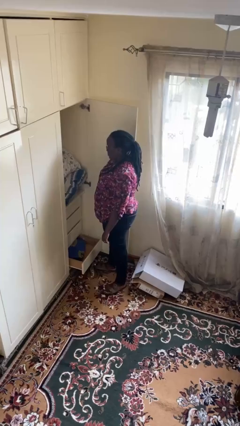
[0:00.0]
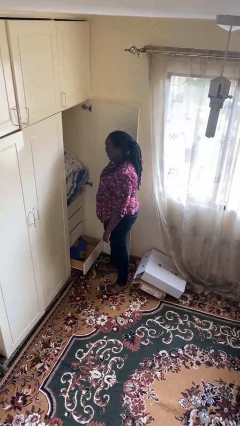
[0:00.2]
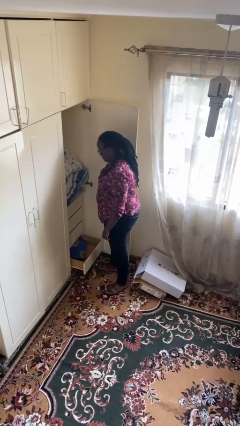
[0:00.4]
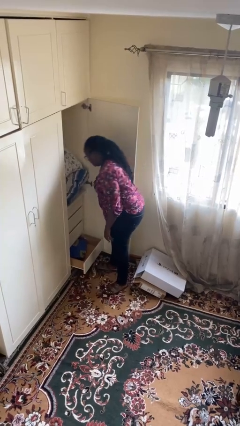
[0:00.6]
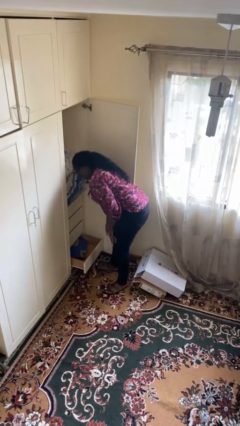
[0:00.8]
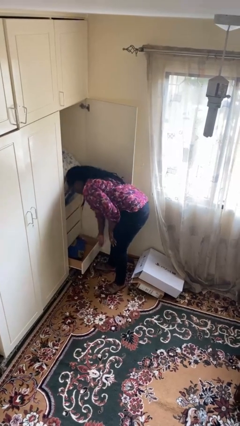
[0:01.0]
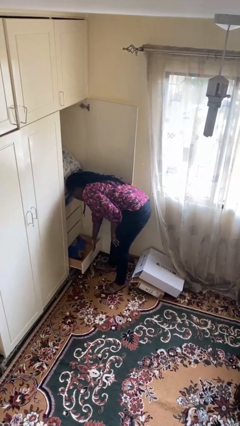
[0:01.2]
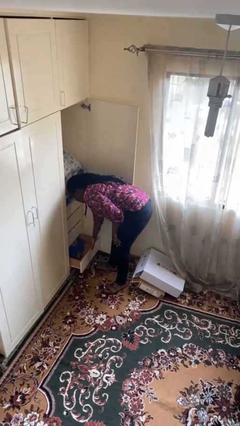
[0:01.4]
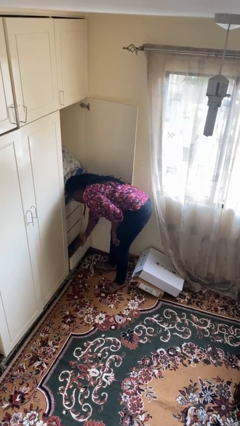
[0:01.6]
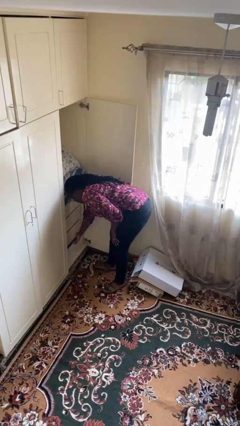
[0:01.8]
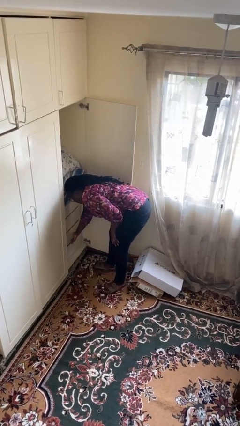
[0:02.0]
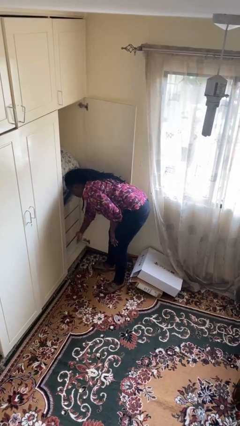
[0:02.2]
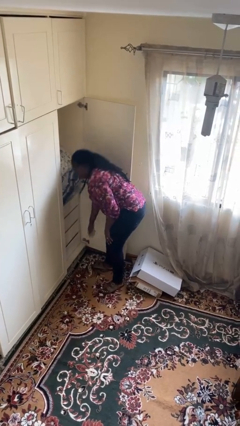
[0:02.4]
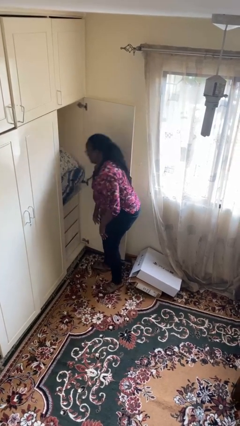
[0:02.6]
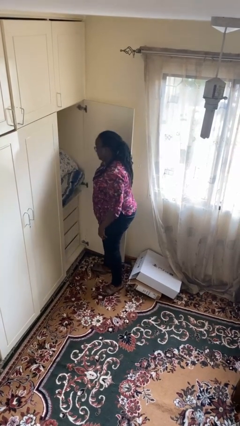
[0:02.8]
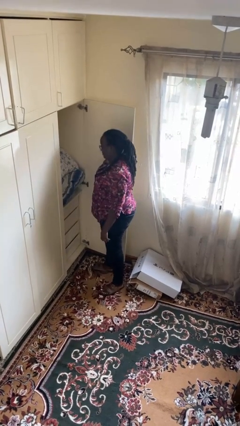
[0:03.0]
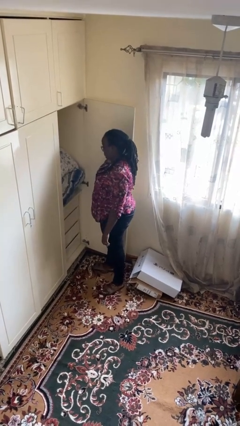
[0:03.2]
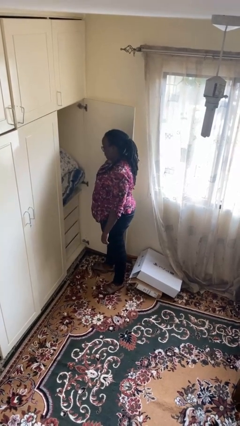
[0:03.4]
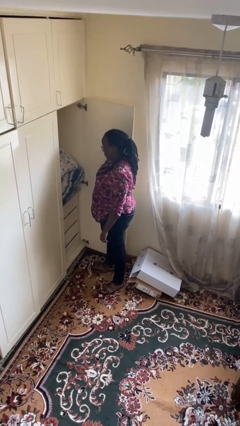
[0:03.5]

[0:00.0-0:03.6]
person closes dresser drawer

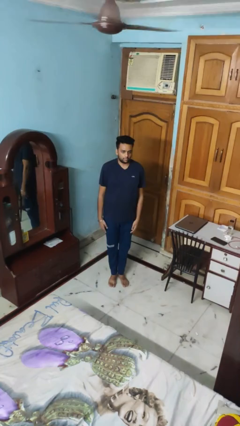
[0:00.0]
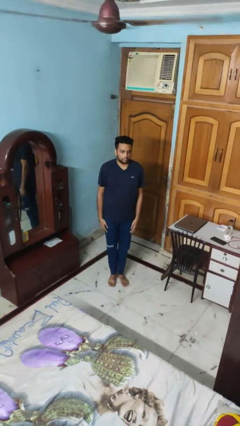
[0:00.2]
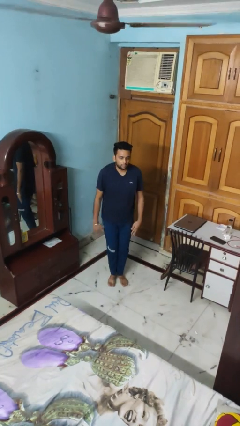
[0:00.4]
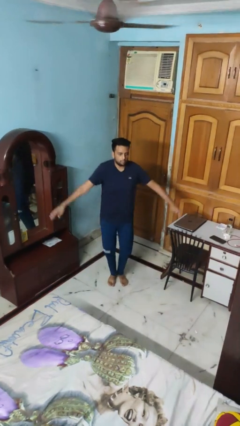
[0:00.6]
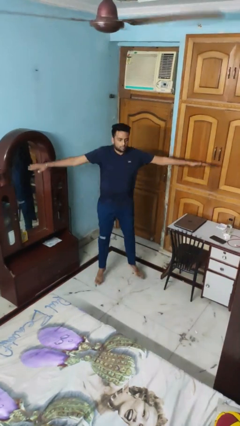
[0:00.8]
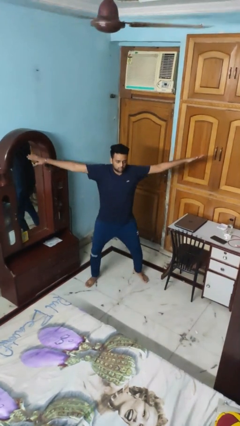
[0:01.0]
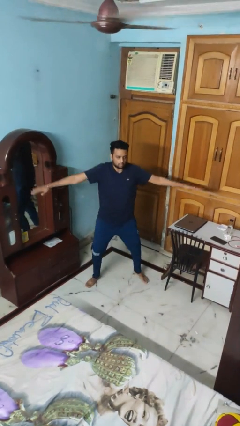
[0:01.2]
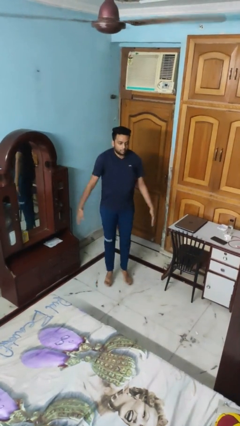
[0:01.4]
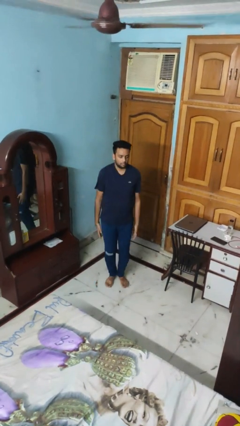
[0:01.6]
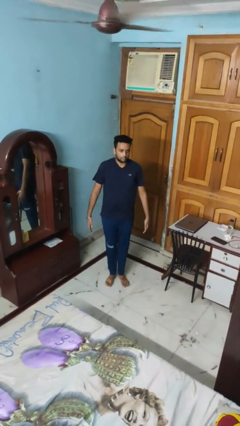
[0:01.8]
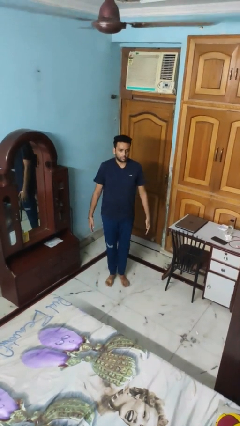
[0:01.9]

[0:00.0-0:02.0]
person exercises with jumping jacks

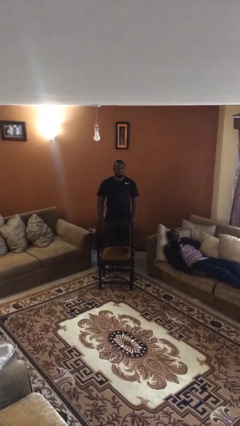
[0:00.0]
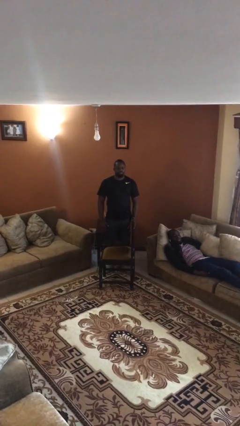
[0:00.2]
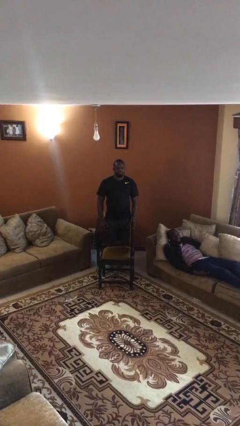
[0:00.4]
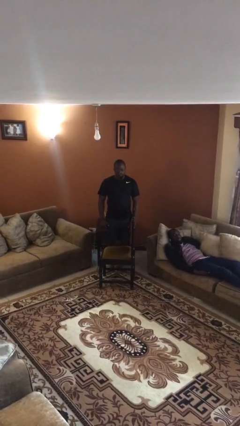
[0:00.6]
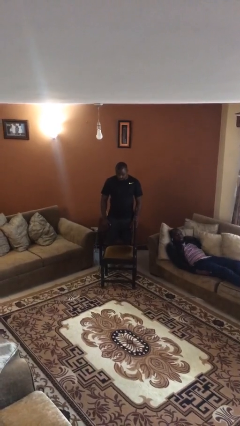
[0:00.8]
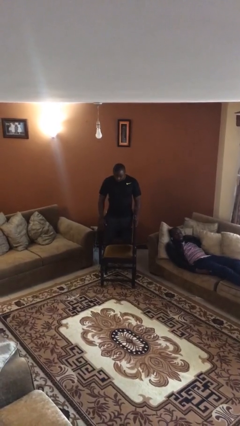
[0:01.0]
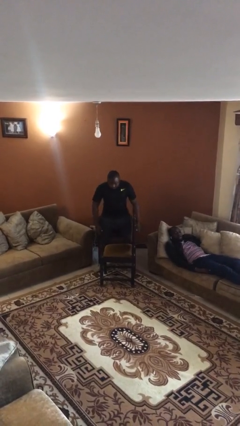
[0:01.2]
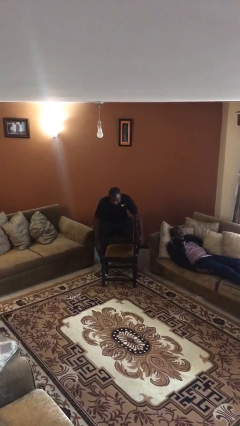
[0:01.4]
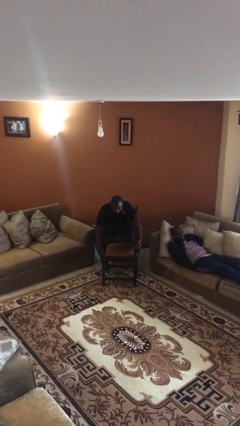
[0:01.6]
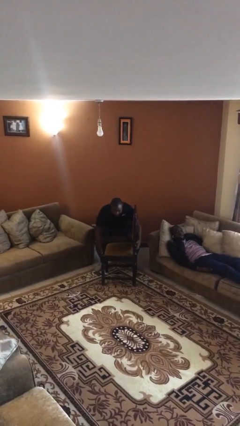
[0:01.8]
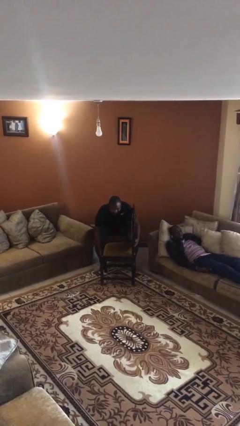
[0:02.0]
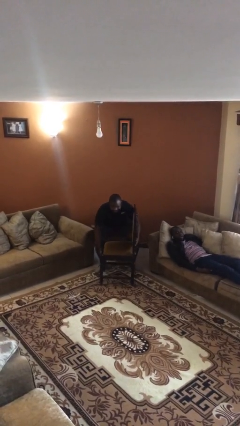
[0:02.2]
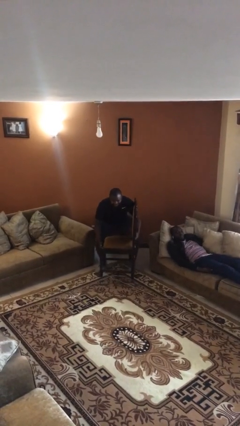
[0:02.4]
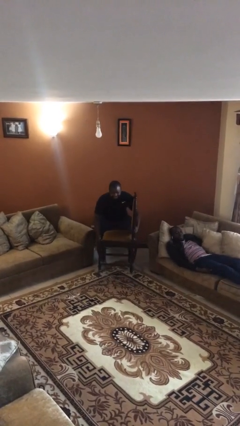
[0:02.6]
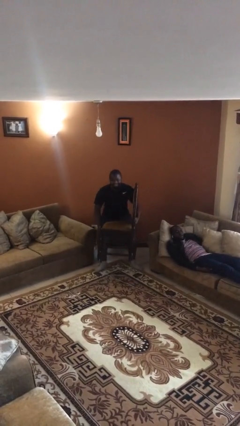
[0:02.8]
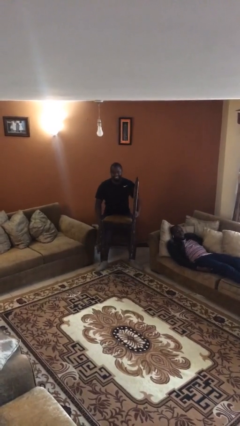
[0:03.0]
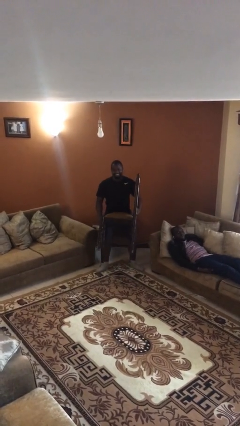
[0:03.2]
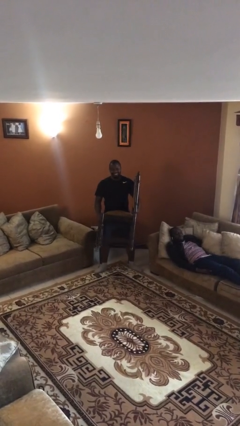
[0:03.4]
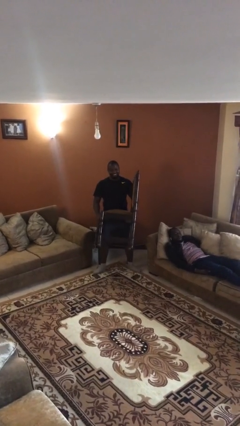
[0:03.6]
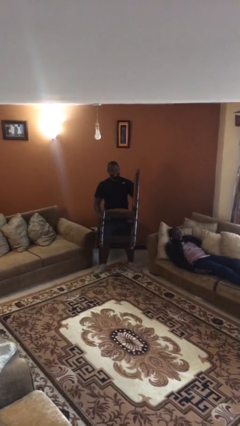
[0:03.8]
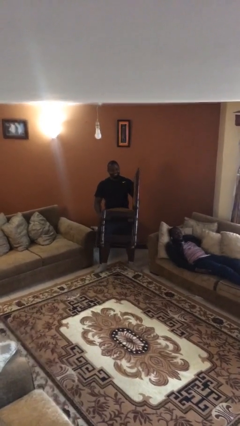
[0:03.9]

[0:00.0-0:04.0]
person picks up object from floor

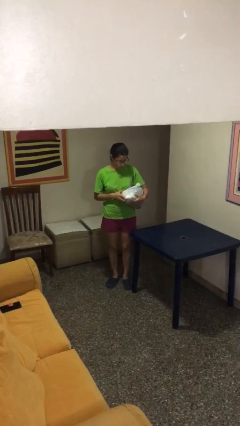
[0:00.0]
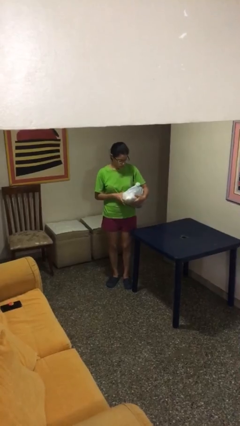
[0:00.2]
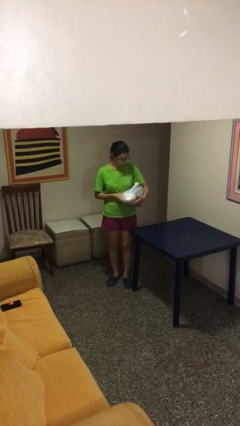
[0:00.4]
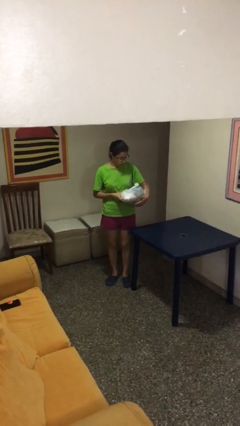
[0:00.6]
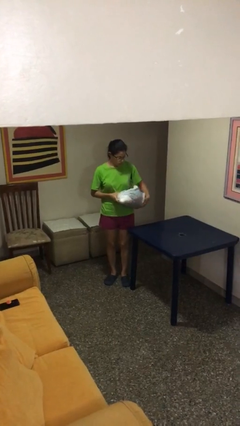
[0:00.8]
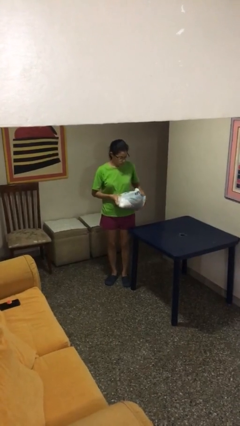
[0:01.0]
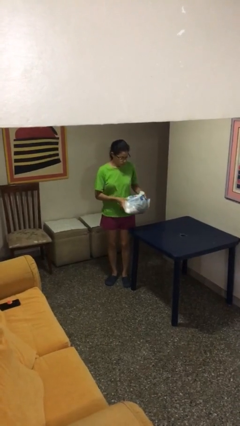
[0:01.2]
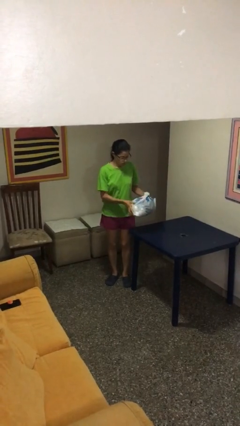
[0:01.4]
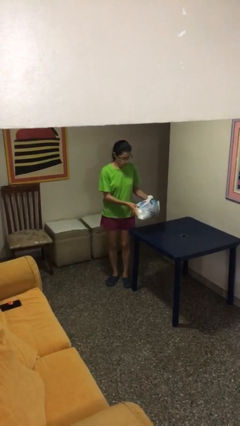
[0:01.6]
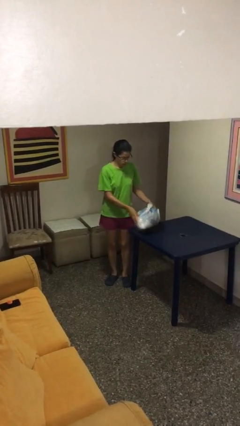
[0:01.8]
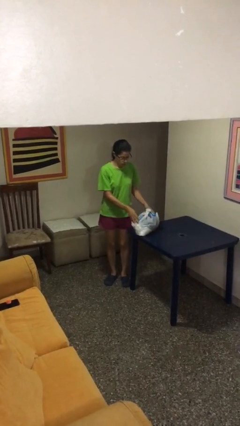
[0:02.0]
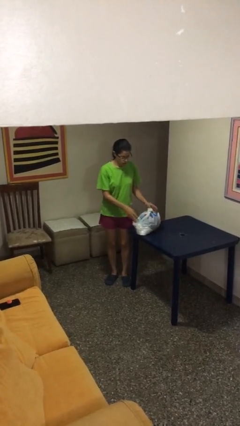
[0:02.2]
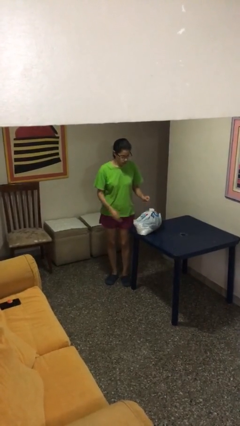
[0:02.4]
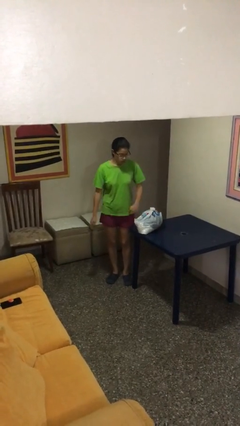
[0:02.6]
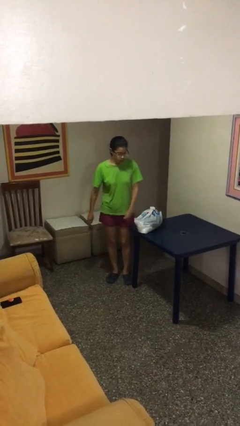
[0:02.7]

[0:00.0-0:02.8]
person puts down object on table

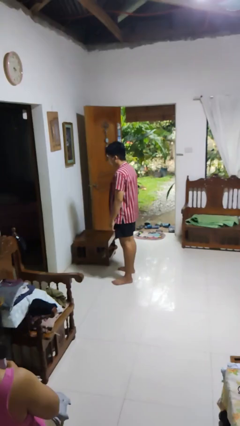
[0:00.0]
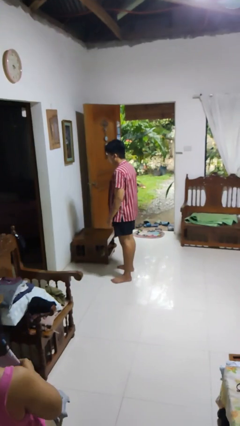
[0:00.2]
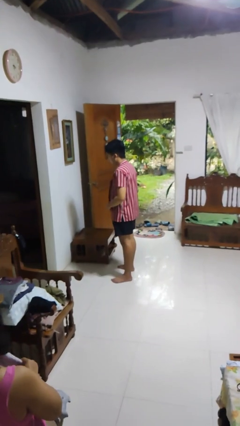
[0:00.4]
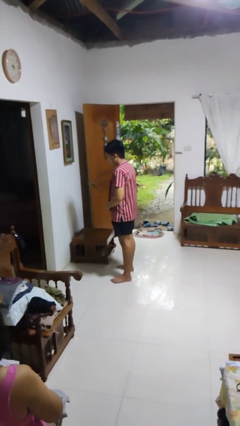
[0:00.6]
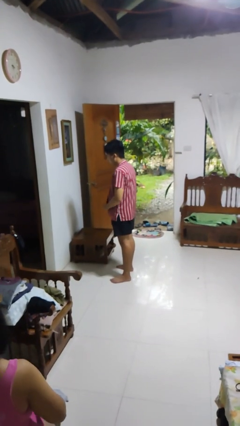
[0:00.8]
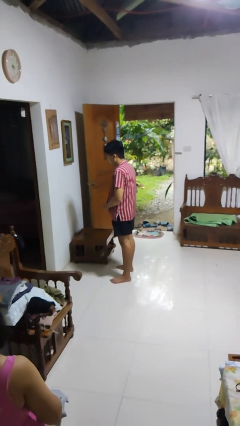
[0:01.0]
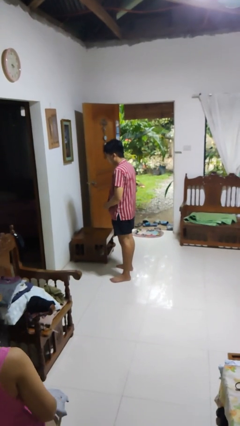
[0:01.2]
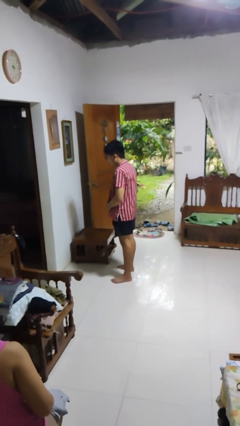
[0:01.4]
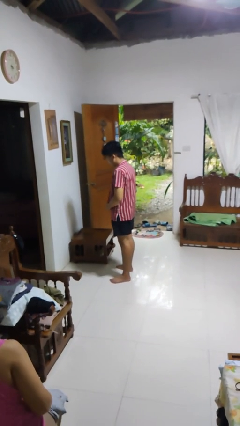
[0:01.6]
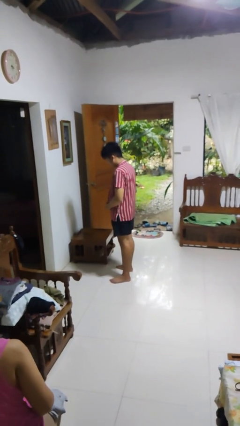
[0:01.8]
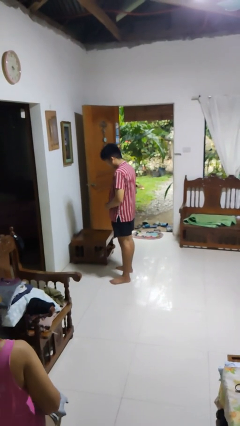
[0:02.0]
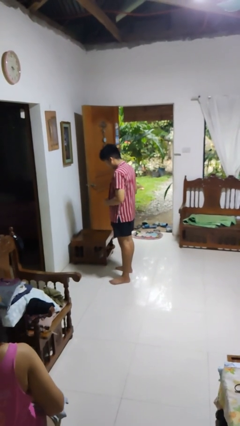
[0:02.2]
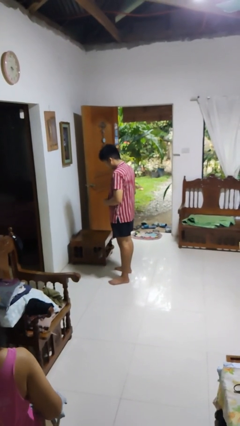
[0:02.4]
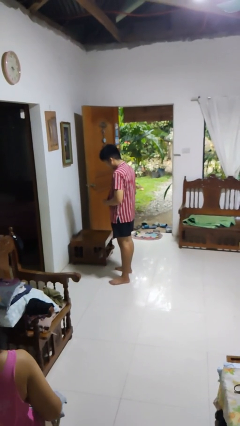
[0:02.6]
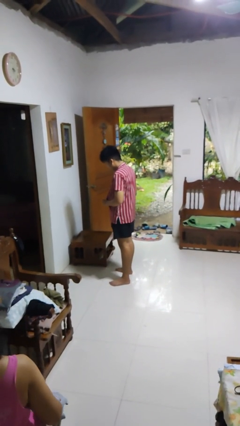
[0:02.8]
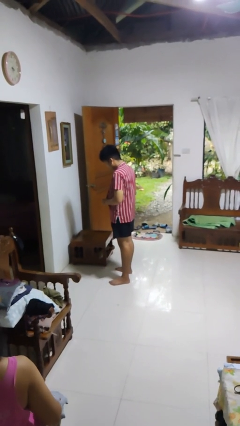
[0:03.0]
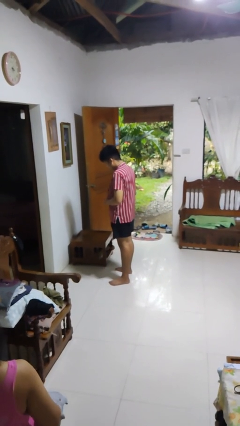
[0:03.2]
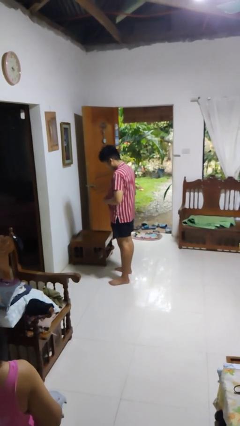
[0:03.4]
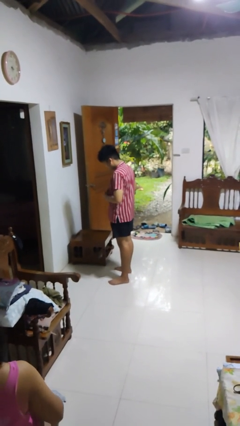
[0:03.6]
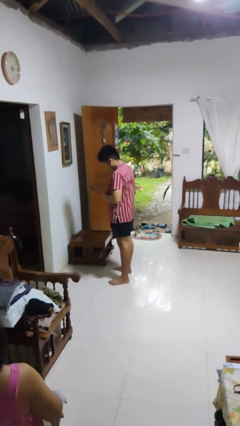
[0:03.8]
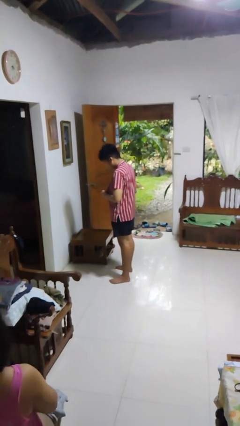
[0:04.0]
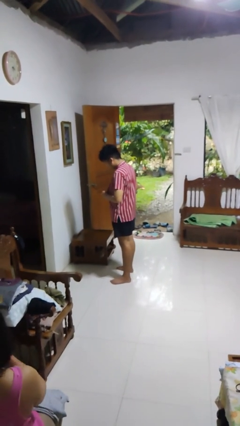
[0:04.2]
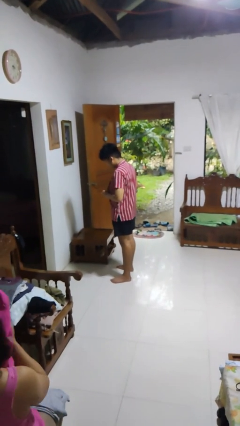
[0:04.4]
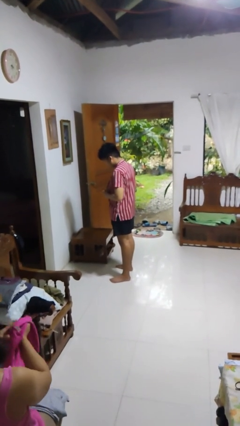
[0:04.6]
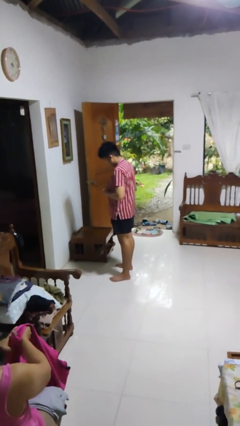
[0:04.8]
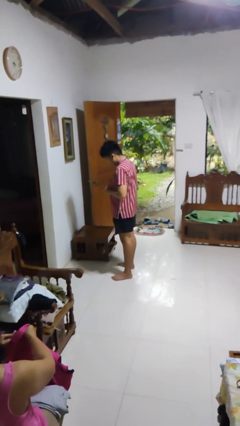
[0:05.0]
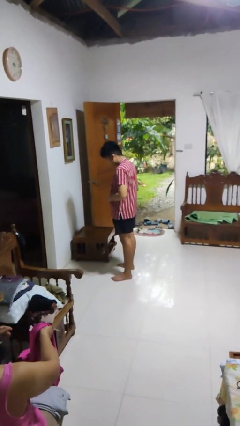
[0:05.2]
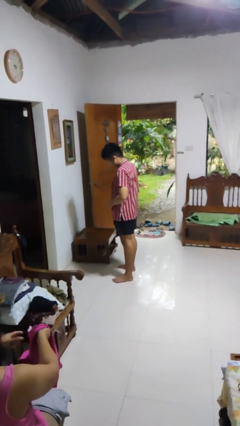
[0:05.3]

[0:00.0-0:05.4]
person buttons shirt
